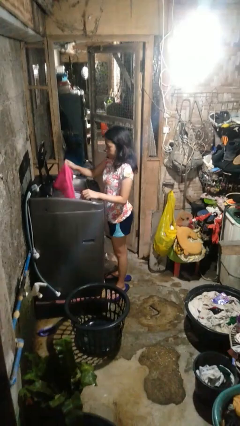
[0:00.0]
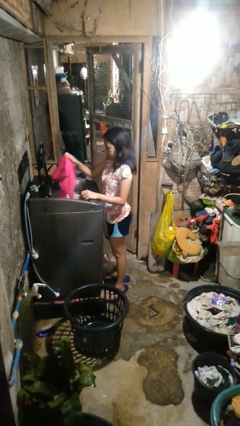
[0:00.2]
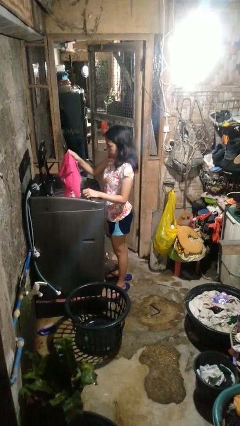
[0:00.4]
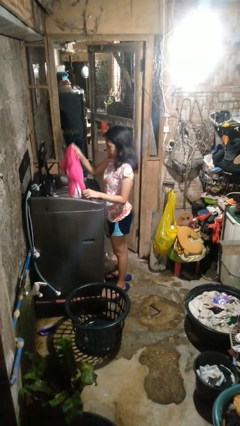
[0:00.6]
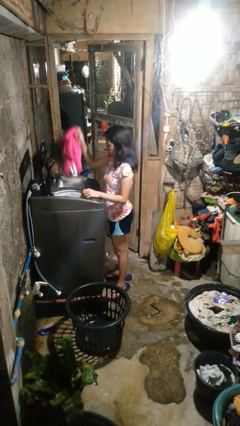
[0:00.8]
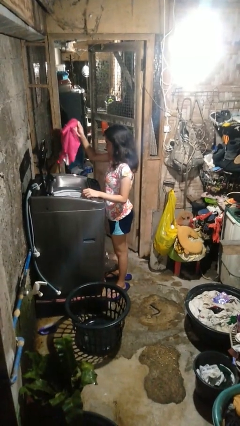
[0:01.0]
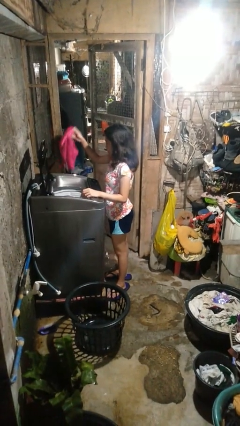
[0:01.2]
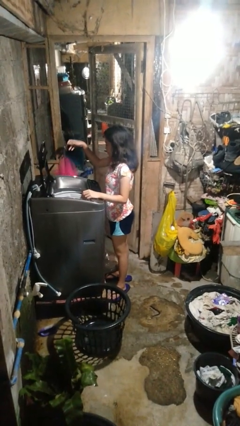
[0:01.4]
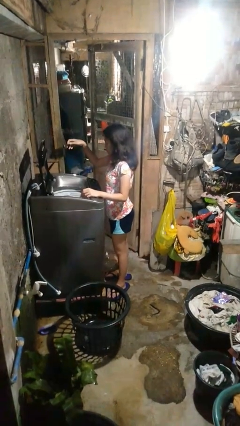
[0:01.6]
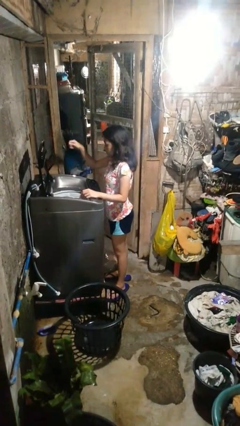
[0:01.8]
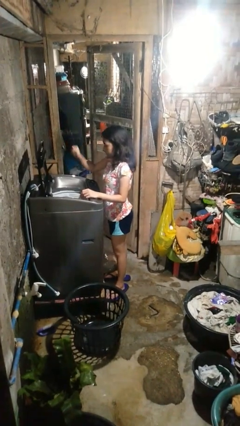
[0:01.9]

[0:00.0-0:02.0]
person loads dryer

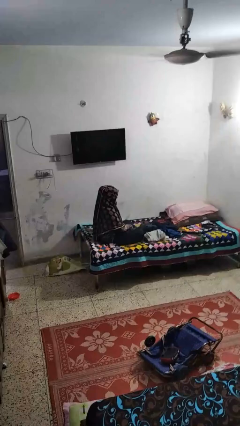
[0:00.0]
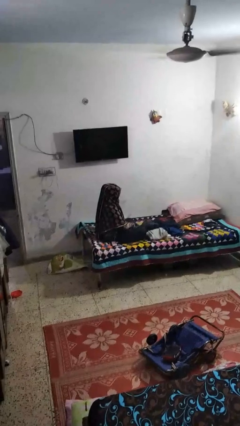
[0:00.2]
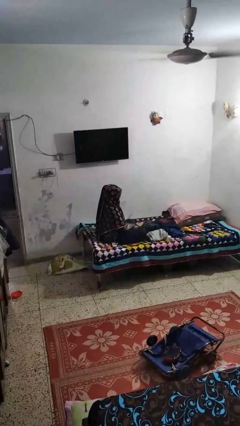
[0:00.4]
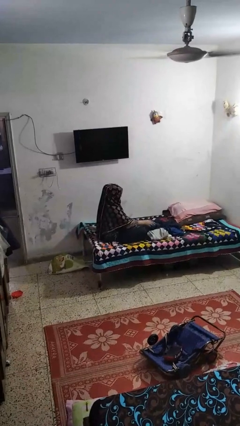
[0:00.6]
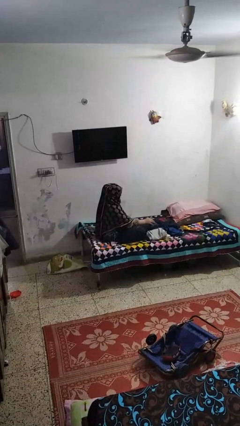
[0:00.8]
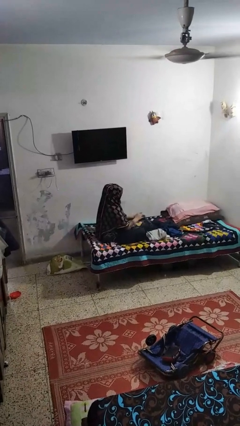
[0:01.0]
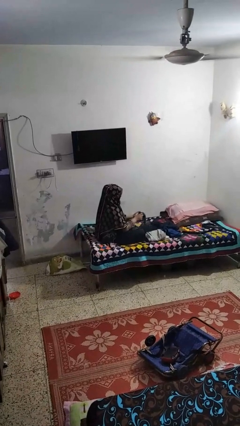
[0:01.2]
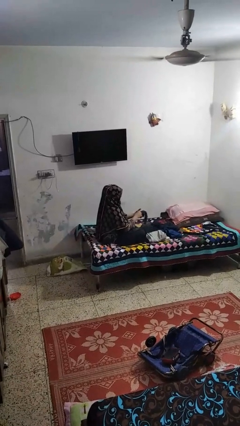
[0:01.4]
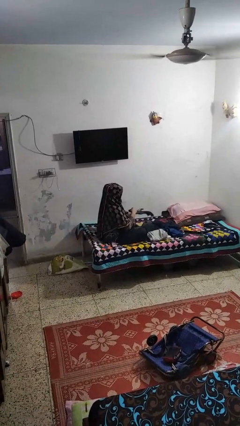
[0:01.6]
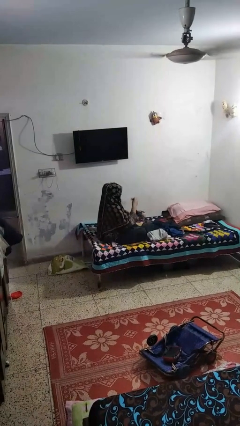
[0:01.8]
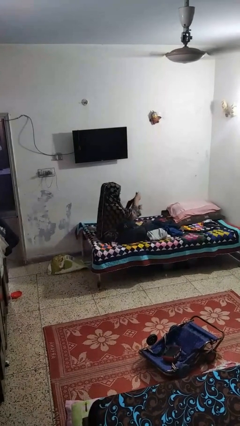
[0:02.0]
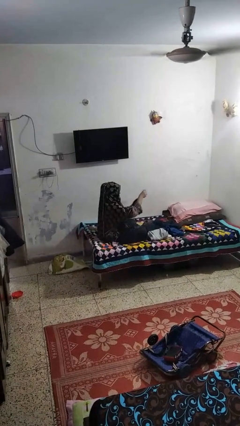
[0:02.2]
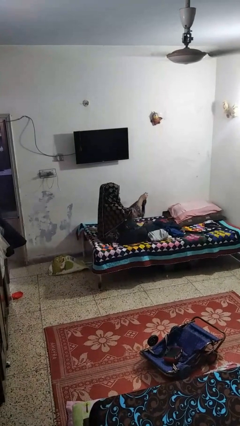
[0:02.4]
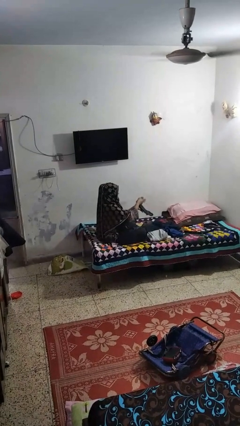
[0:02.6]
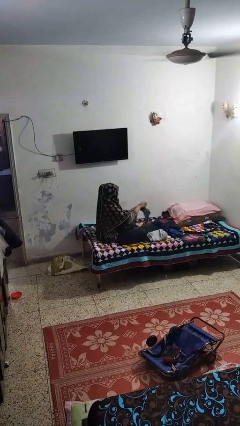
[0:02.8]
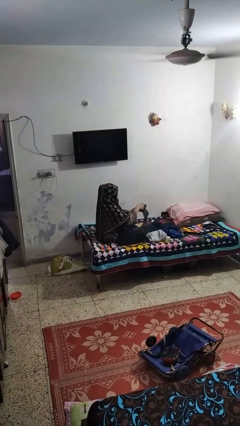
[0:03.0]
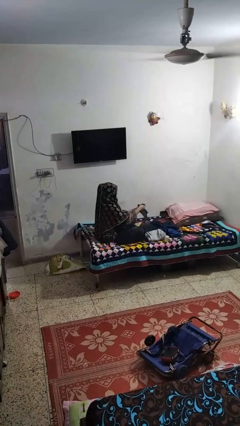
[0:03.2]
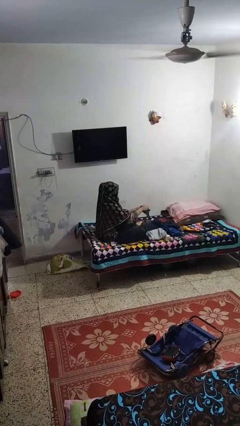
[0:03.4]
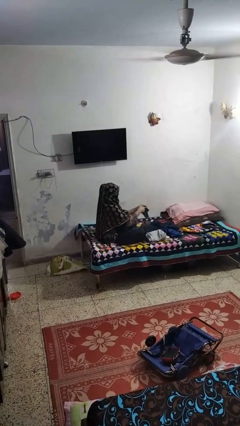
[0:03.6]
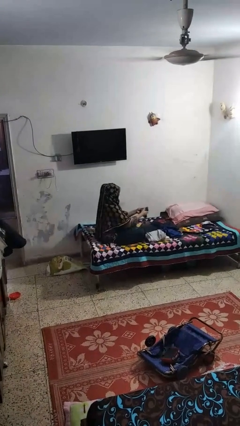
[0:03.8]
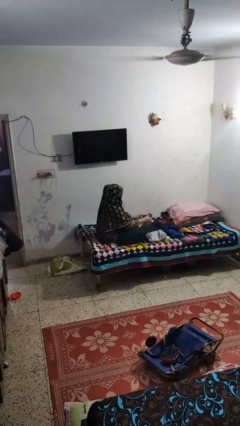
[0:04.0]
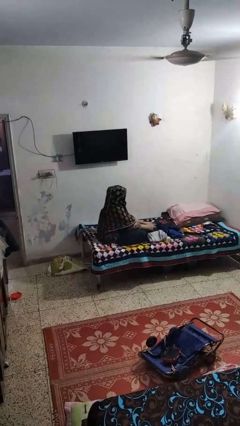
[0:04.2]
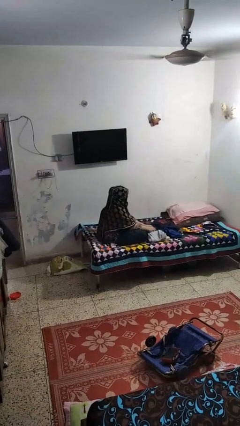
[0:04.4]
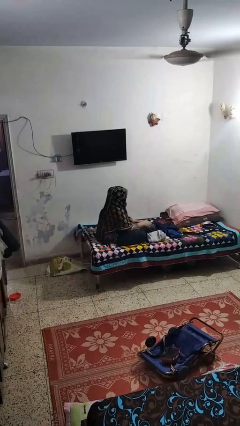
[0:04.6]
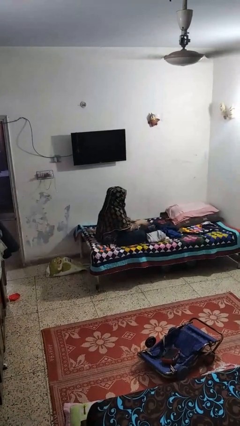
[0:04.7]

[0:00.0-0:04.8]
person folds socks

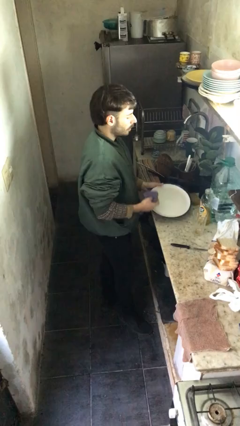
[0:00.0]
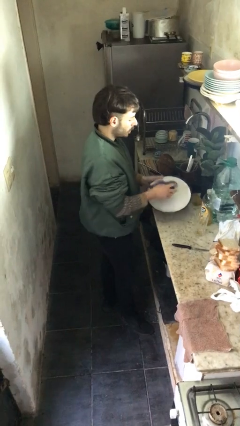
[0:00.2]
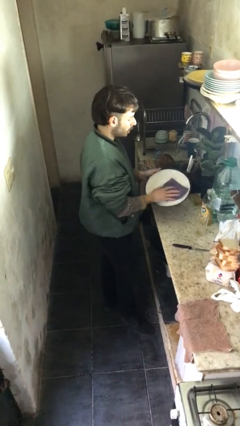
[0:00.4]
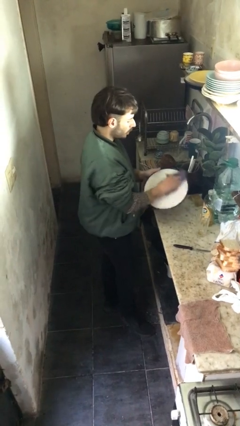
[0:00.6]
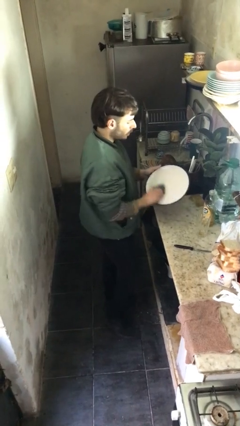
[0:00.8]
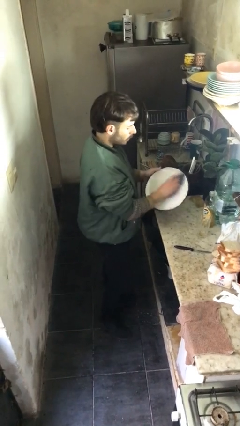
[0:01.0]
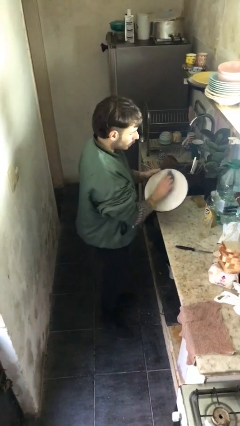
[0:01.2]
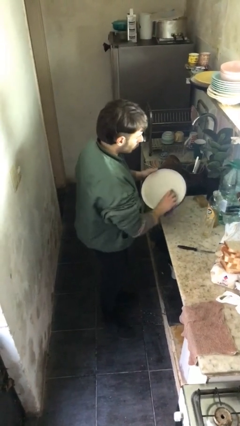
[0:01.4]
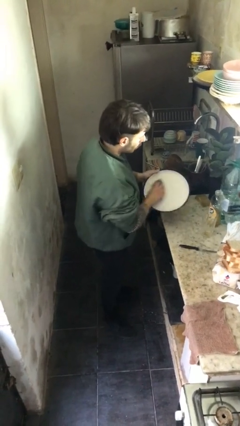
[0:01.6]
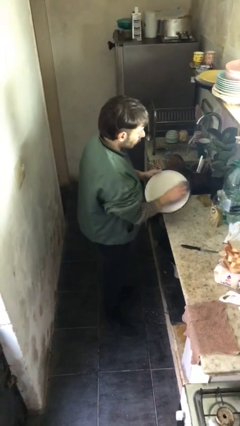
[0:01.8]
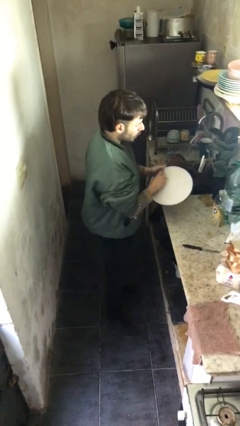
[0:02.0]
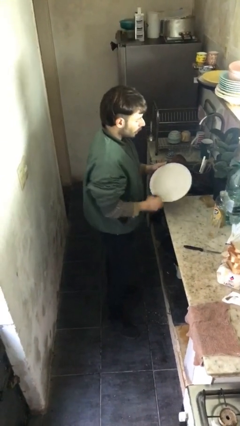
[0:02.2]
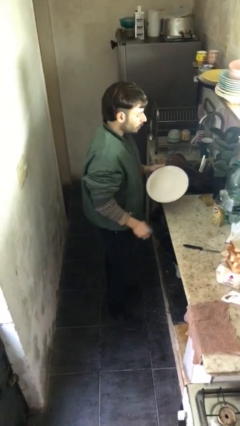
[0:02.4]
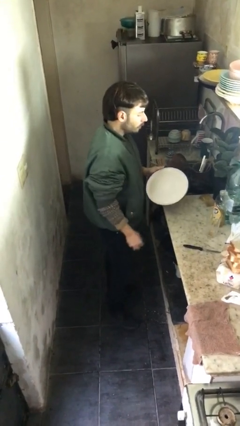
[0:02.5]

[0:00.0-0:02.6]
person dries dish

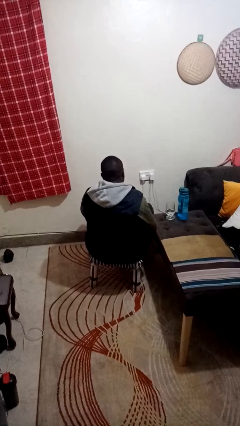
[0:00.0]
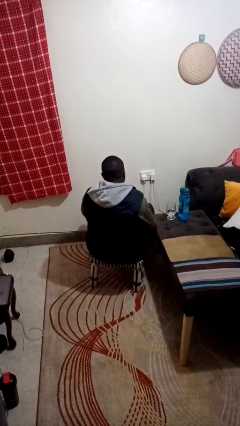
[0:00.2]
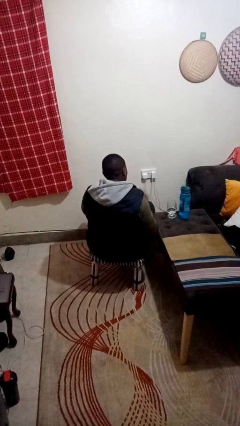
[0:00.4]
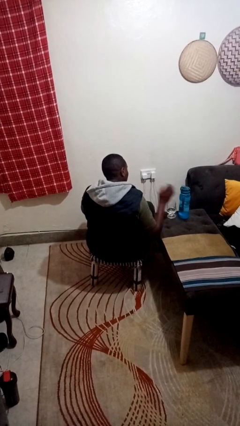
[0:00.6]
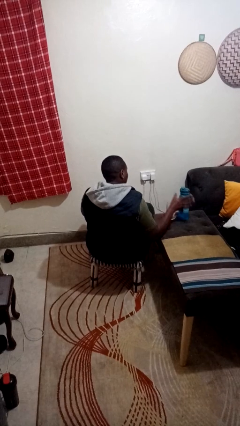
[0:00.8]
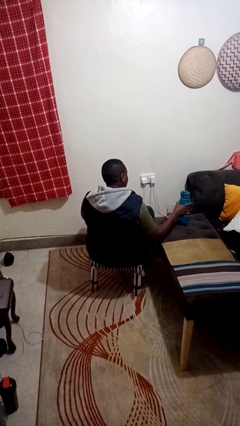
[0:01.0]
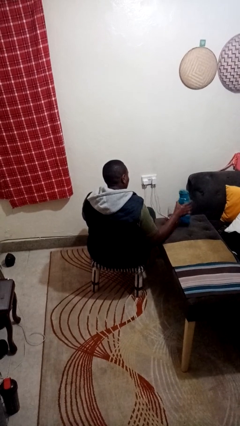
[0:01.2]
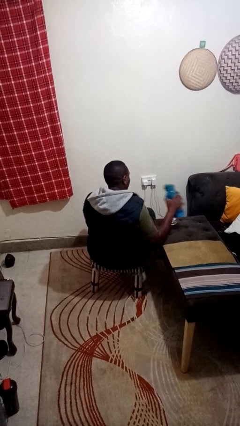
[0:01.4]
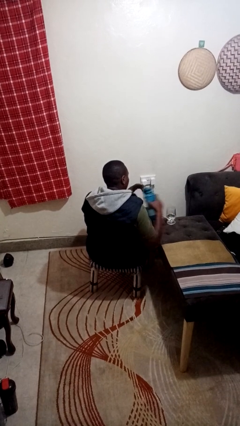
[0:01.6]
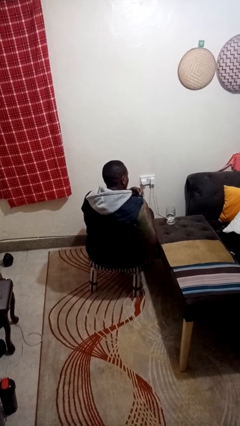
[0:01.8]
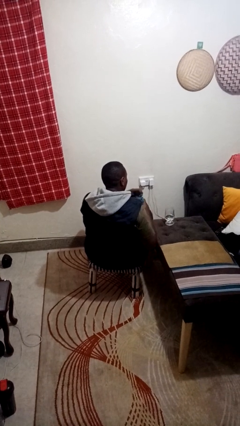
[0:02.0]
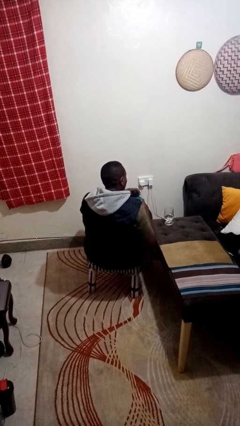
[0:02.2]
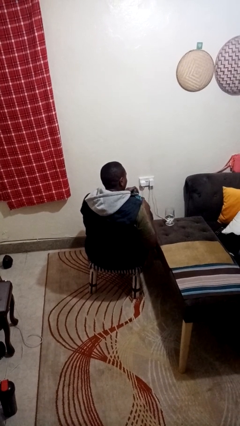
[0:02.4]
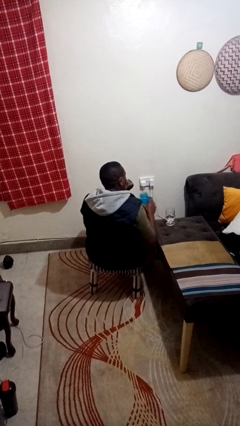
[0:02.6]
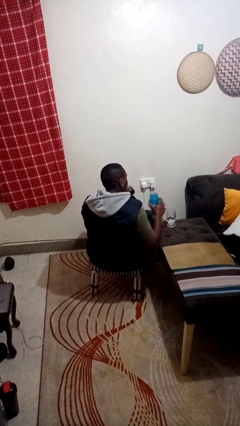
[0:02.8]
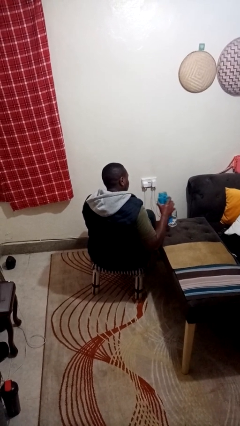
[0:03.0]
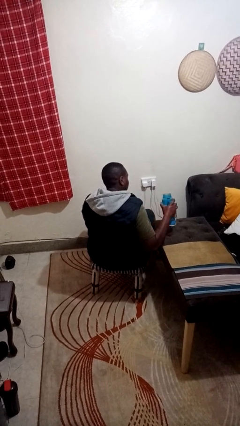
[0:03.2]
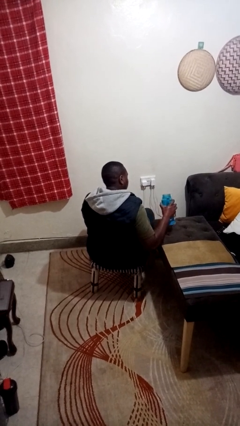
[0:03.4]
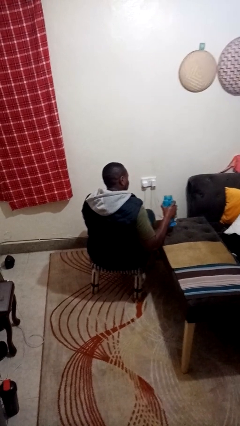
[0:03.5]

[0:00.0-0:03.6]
person unscrews lid from bottle

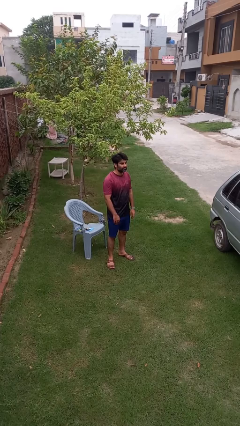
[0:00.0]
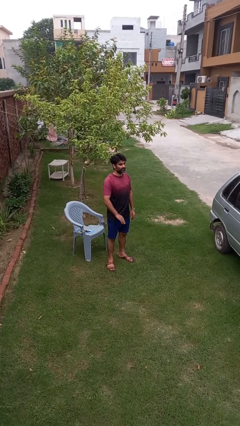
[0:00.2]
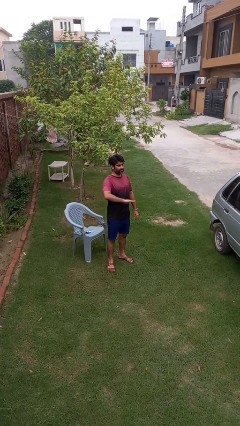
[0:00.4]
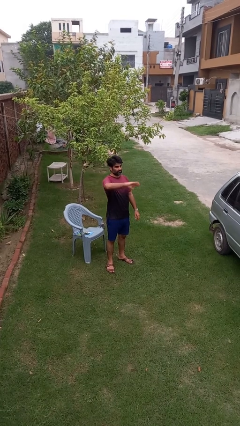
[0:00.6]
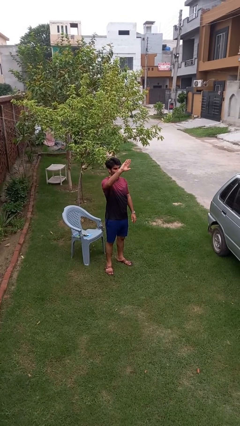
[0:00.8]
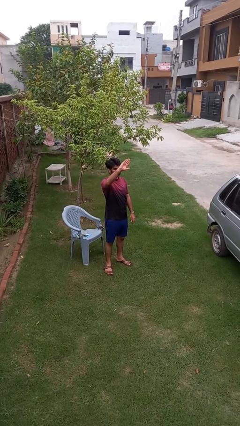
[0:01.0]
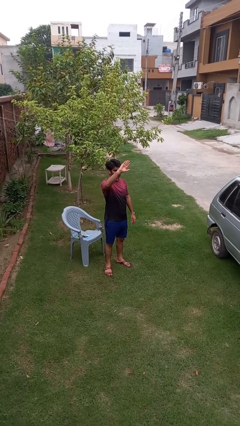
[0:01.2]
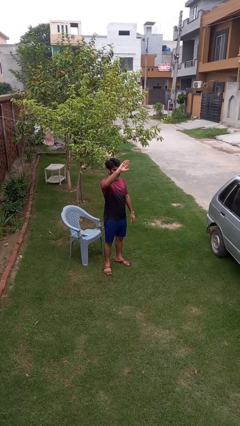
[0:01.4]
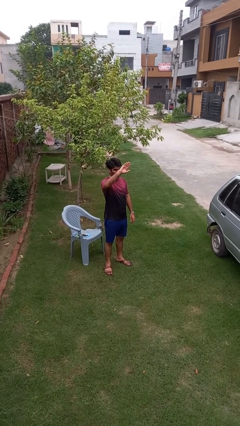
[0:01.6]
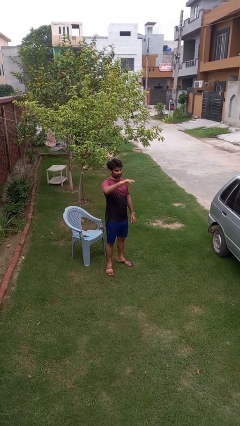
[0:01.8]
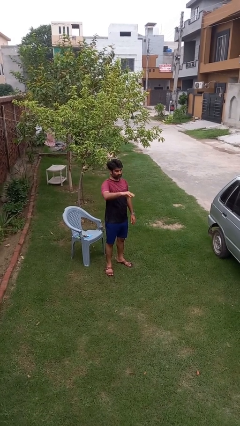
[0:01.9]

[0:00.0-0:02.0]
person gestures swipe up

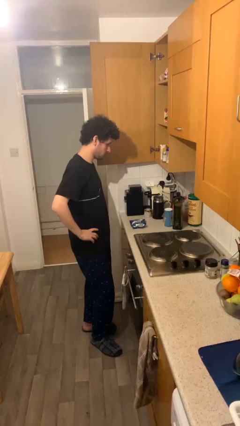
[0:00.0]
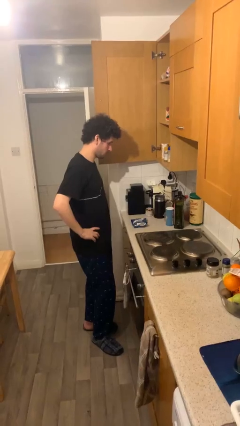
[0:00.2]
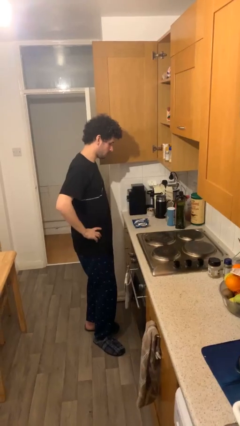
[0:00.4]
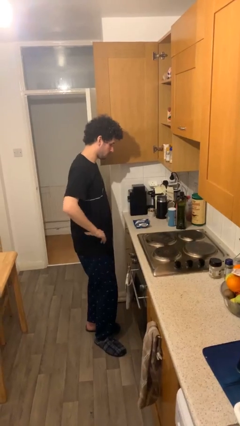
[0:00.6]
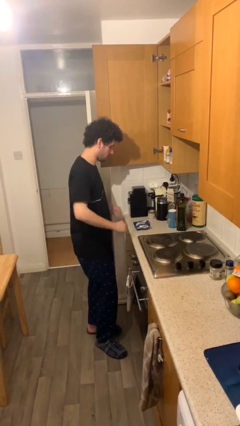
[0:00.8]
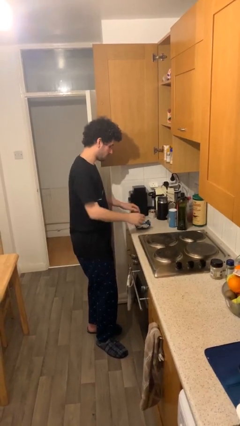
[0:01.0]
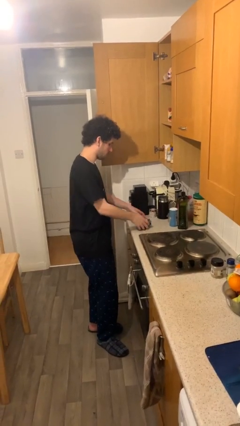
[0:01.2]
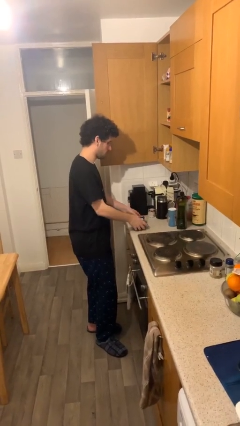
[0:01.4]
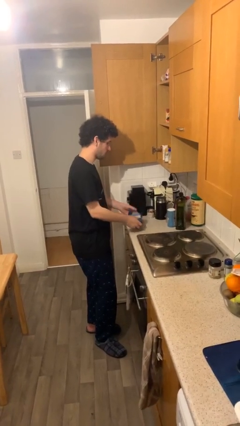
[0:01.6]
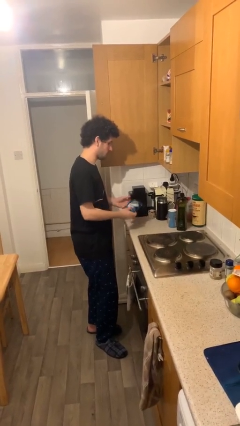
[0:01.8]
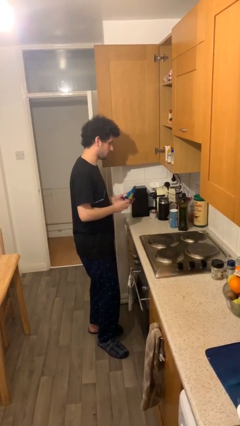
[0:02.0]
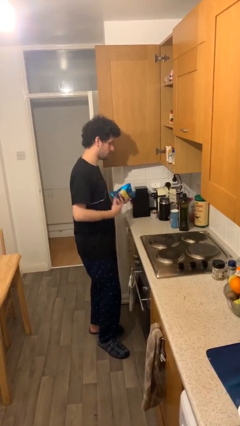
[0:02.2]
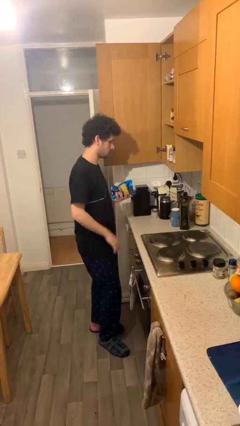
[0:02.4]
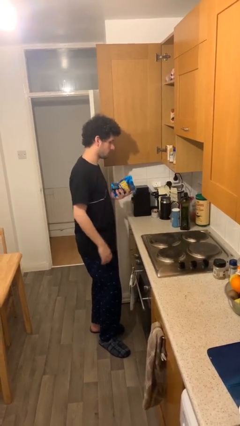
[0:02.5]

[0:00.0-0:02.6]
person picks up object from table
